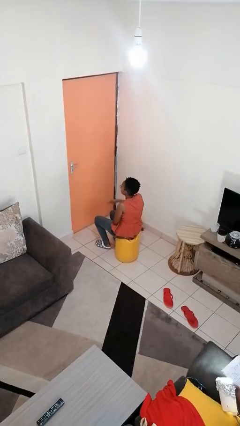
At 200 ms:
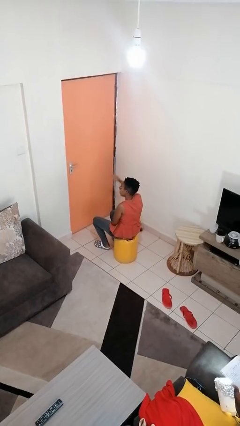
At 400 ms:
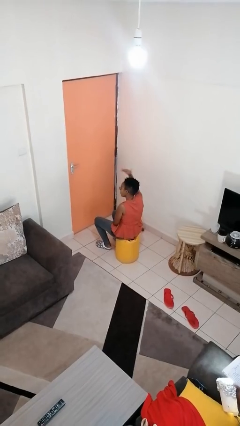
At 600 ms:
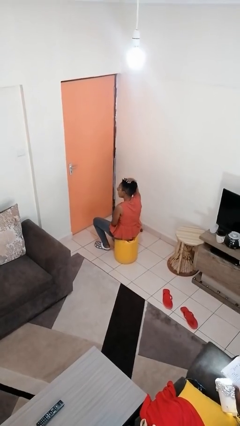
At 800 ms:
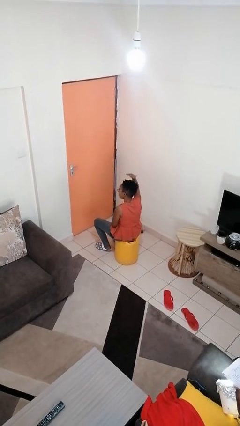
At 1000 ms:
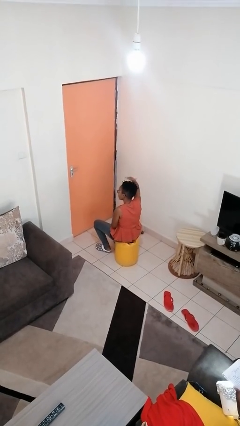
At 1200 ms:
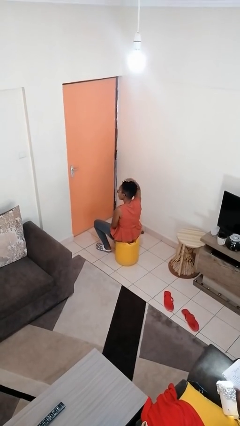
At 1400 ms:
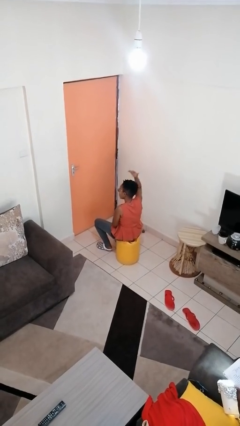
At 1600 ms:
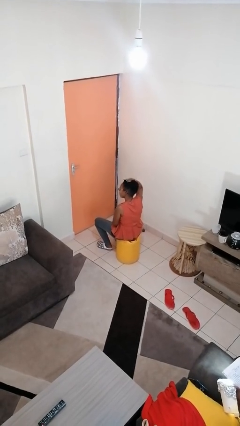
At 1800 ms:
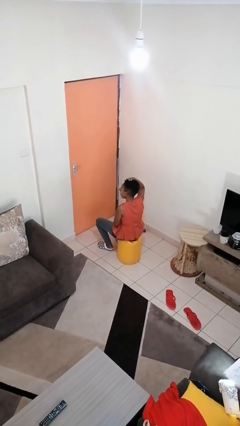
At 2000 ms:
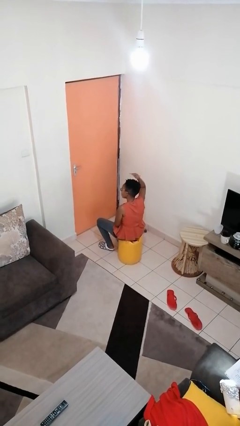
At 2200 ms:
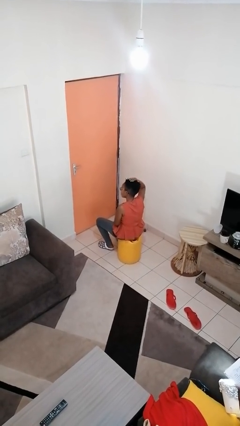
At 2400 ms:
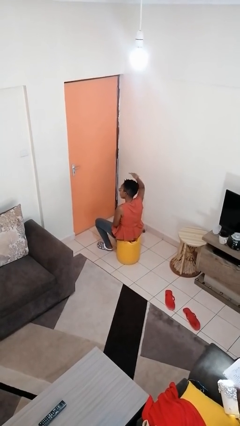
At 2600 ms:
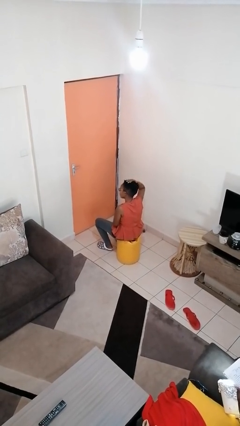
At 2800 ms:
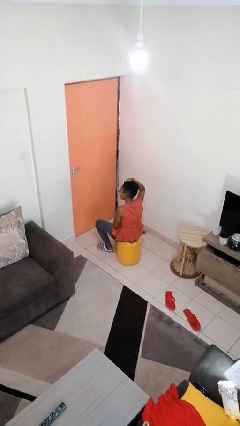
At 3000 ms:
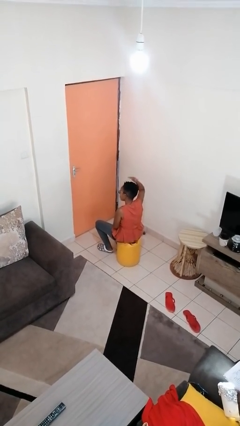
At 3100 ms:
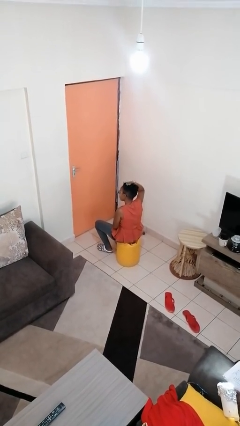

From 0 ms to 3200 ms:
person pats head

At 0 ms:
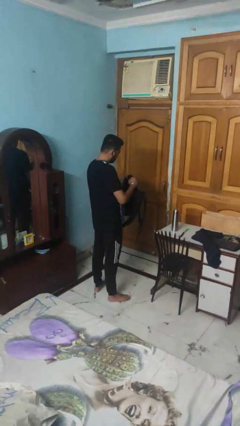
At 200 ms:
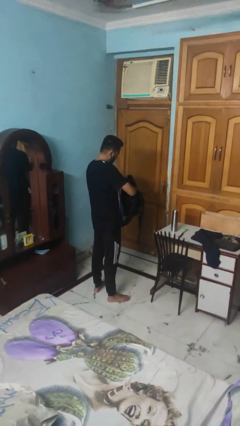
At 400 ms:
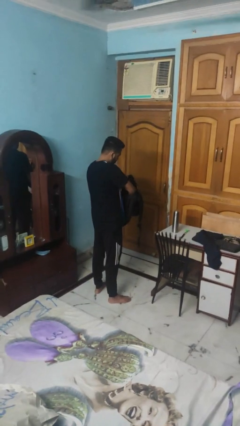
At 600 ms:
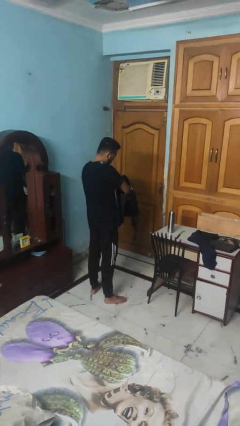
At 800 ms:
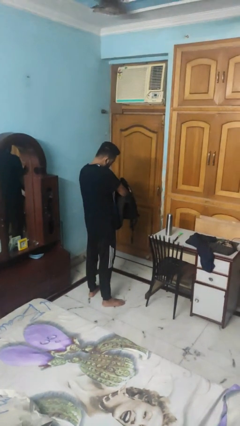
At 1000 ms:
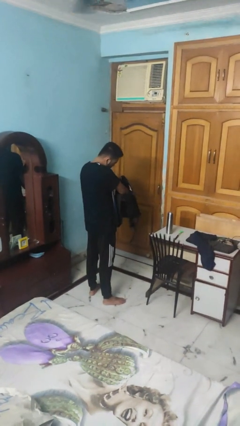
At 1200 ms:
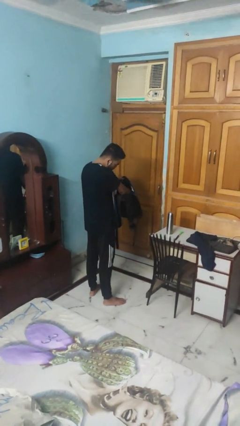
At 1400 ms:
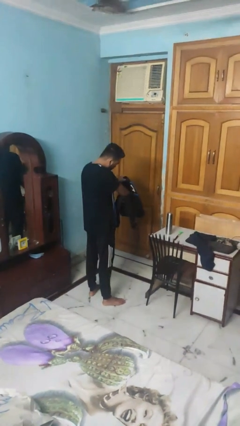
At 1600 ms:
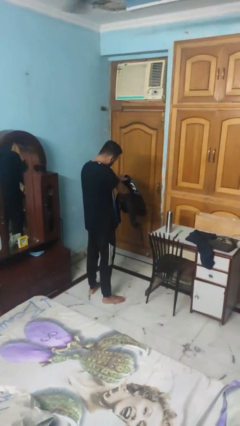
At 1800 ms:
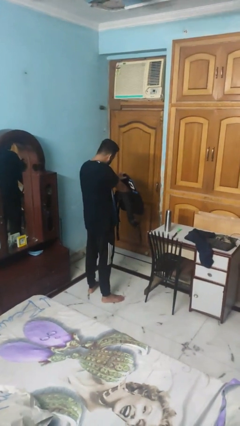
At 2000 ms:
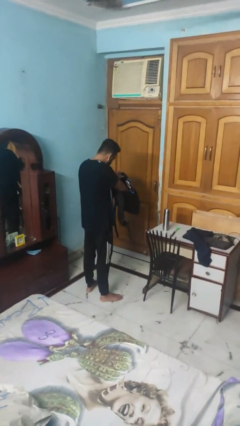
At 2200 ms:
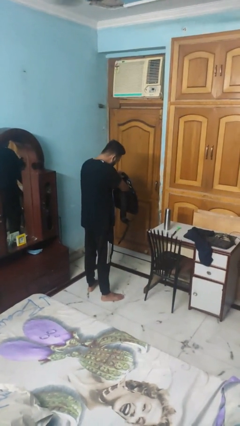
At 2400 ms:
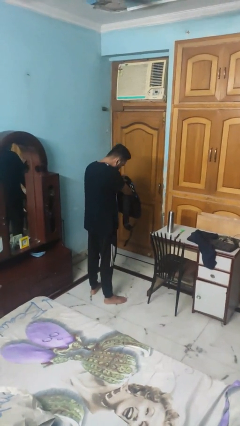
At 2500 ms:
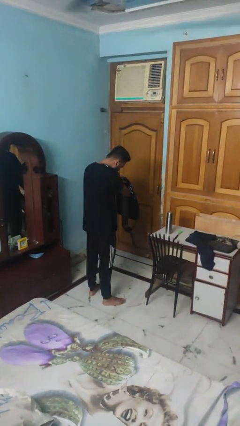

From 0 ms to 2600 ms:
person searches in backpack

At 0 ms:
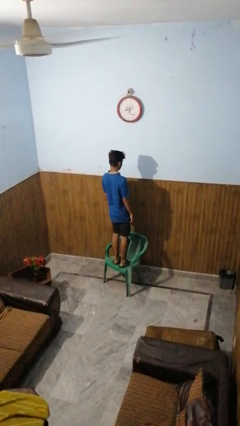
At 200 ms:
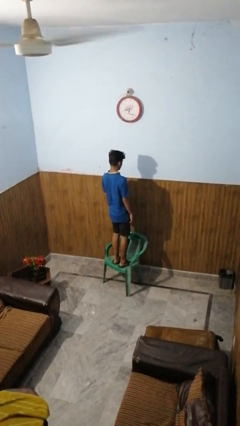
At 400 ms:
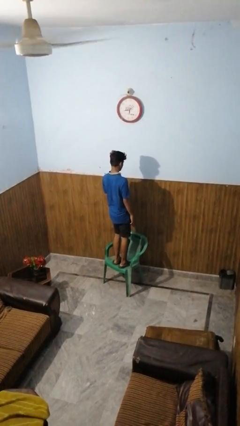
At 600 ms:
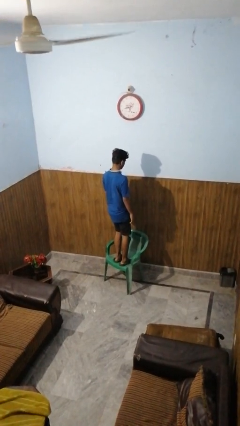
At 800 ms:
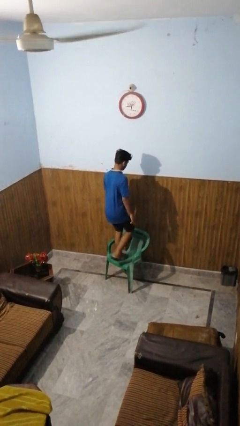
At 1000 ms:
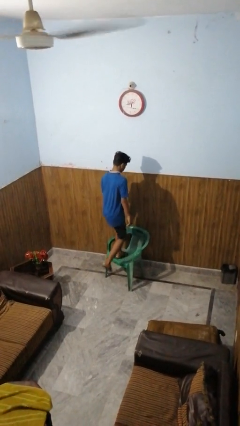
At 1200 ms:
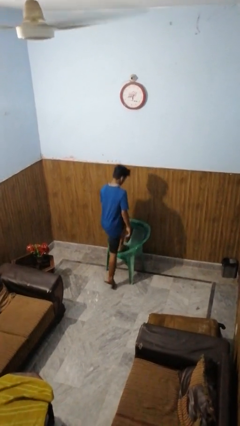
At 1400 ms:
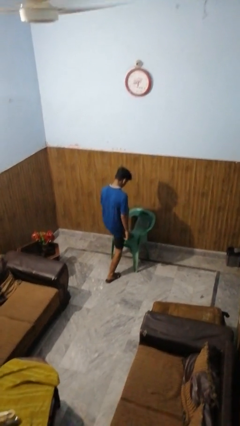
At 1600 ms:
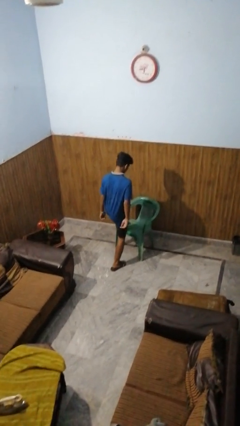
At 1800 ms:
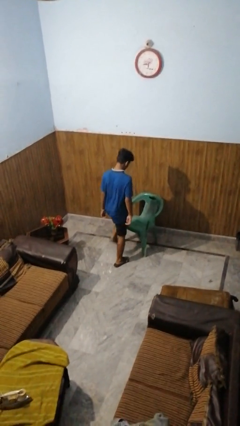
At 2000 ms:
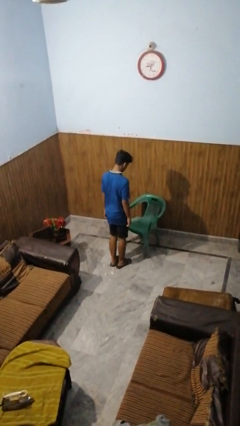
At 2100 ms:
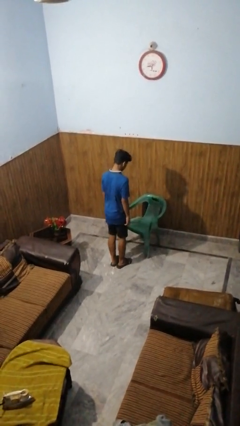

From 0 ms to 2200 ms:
person climbs off chair

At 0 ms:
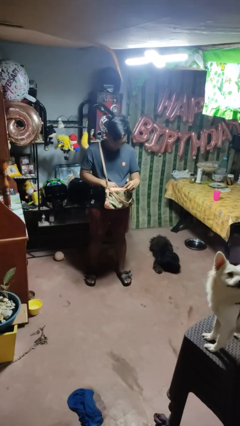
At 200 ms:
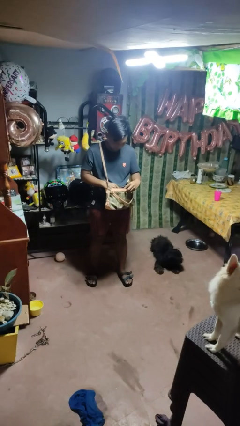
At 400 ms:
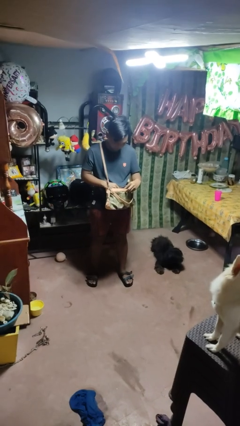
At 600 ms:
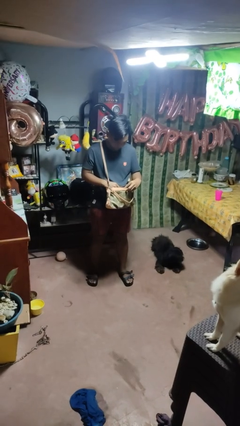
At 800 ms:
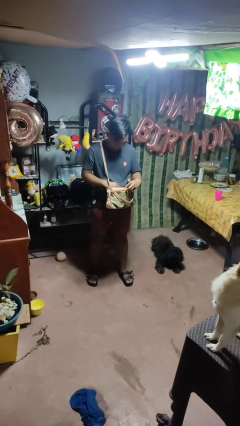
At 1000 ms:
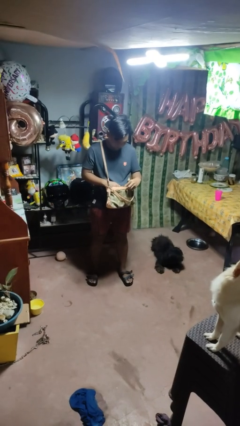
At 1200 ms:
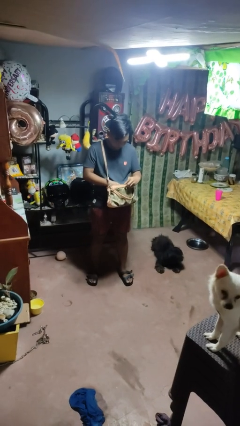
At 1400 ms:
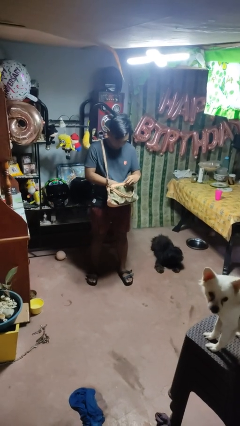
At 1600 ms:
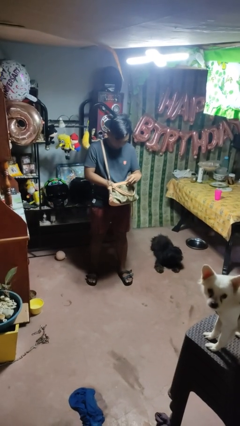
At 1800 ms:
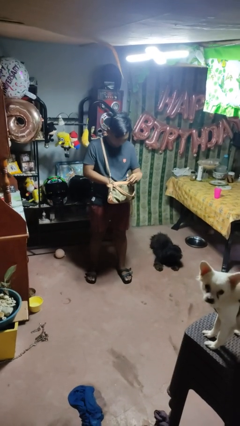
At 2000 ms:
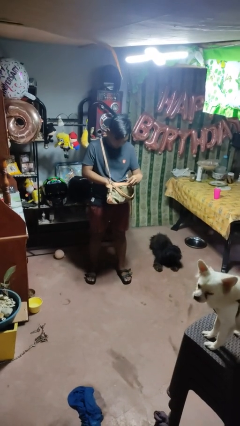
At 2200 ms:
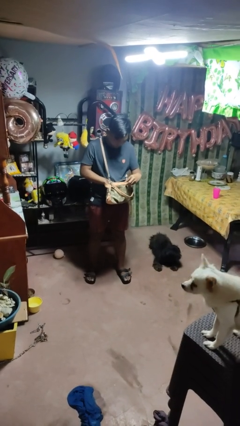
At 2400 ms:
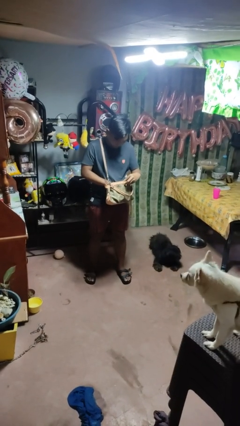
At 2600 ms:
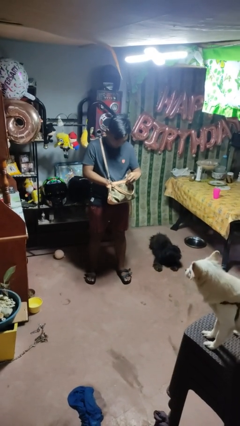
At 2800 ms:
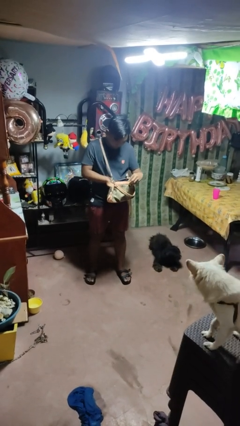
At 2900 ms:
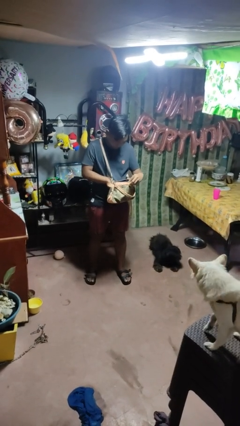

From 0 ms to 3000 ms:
person searches in purse

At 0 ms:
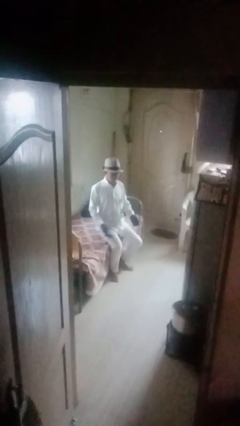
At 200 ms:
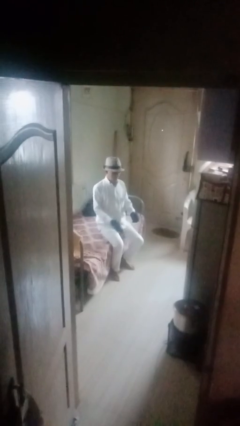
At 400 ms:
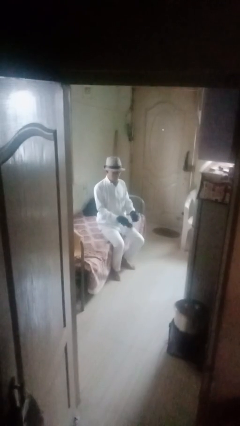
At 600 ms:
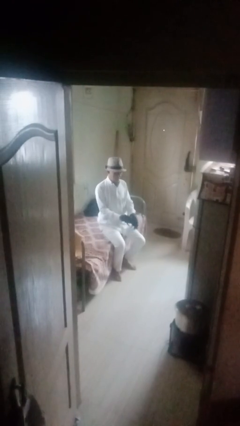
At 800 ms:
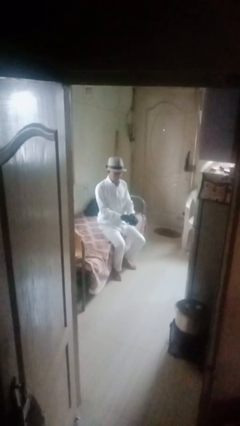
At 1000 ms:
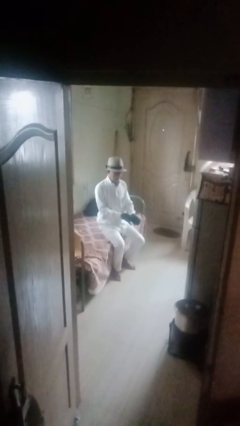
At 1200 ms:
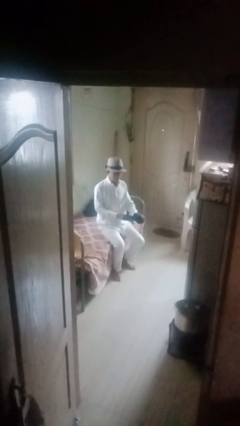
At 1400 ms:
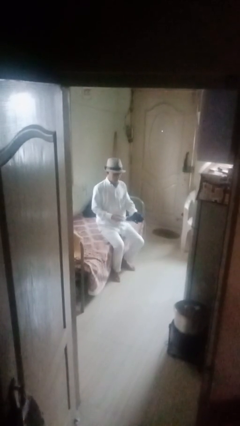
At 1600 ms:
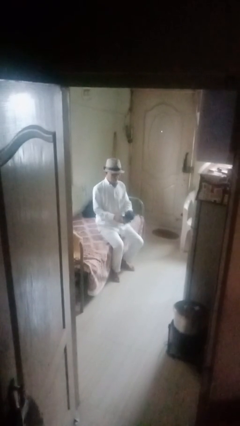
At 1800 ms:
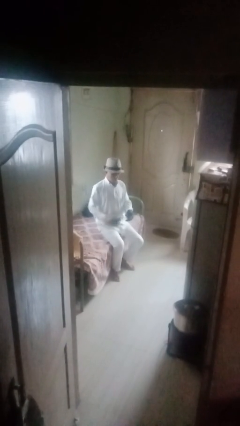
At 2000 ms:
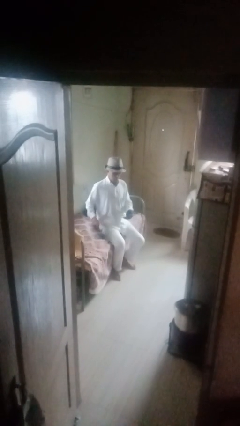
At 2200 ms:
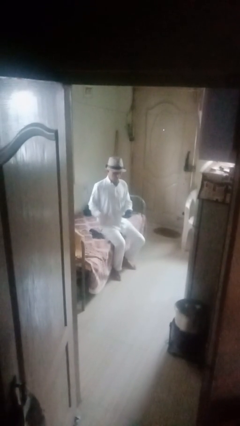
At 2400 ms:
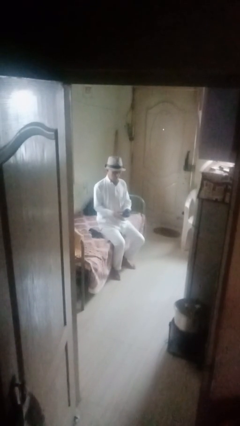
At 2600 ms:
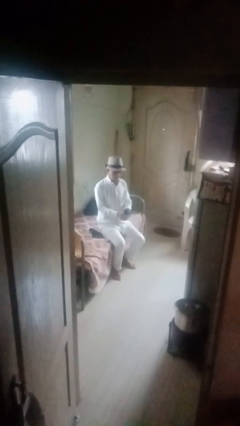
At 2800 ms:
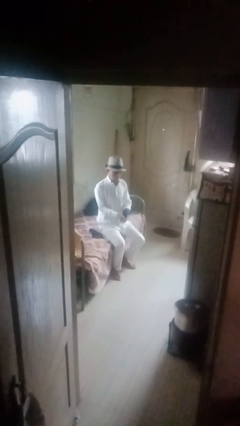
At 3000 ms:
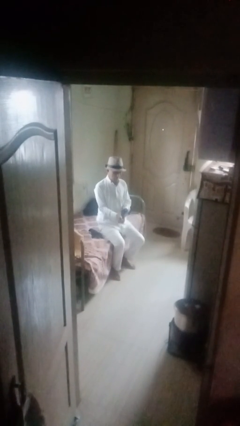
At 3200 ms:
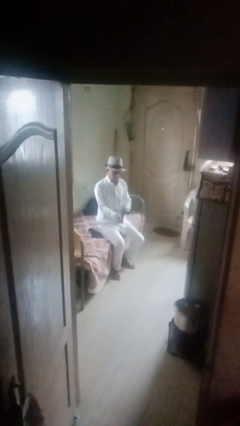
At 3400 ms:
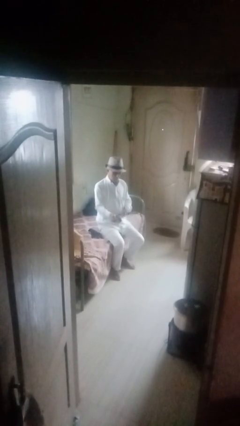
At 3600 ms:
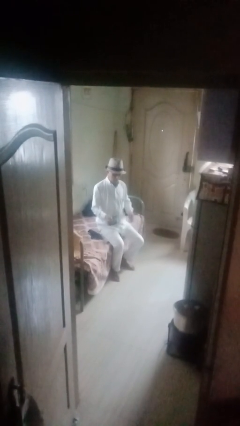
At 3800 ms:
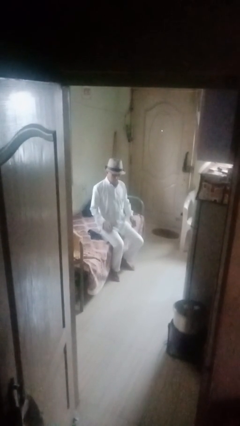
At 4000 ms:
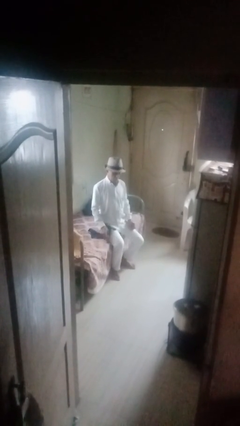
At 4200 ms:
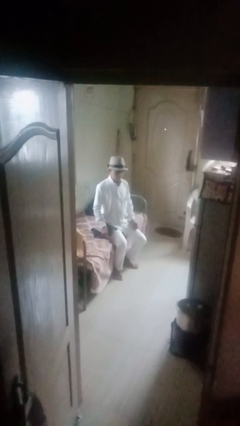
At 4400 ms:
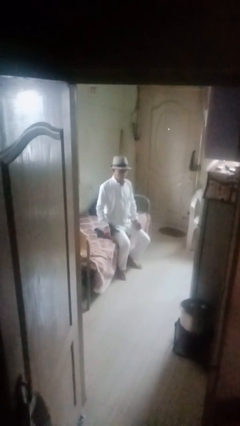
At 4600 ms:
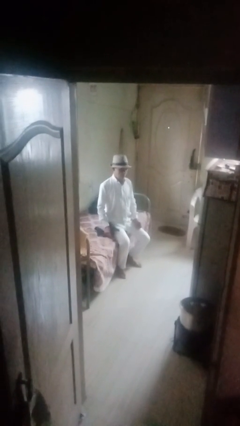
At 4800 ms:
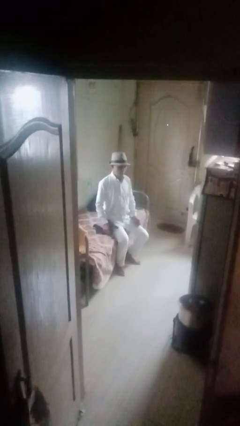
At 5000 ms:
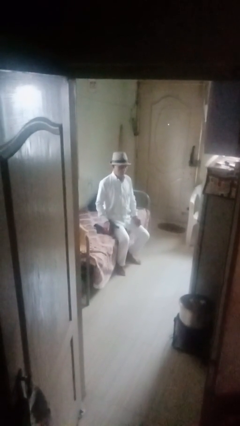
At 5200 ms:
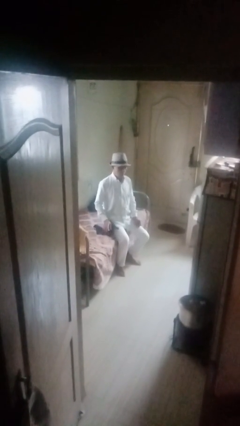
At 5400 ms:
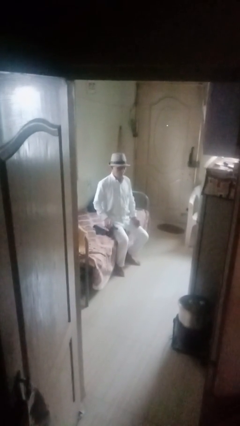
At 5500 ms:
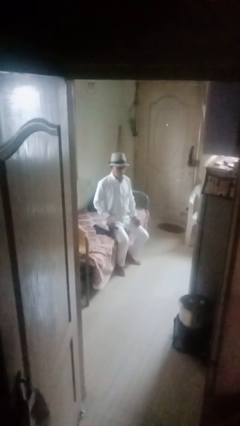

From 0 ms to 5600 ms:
person takes off gloves

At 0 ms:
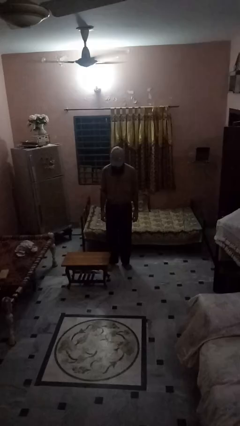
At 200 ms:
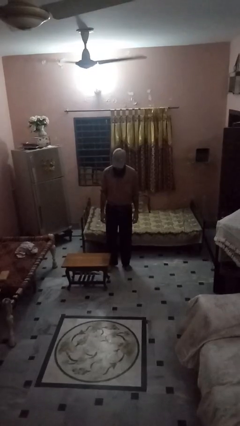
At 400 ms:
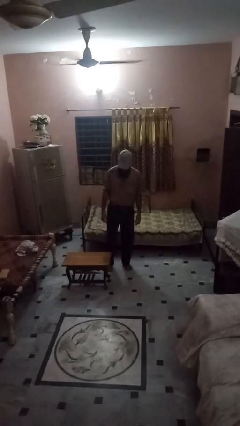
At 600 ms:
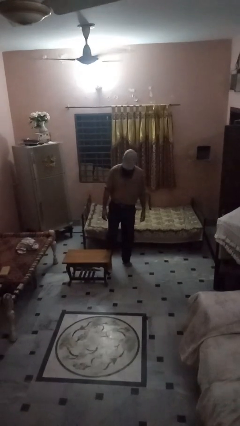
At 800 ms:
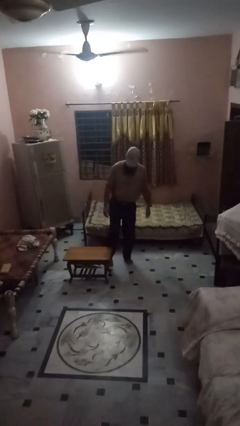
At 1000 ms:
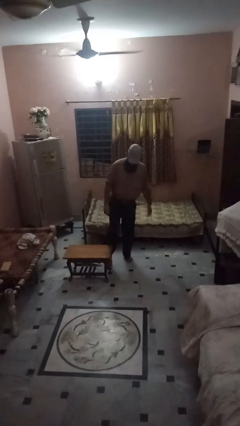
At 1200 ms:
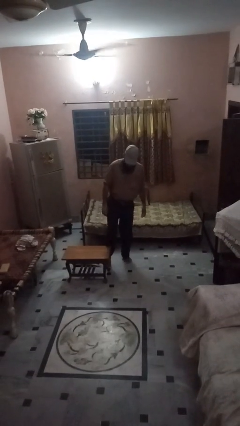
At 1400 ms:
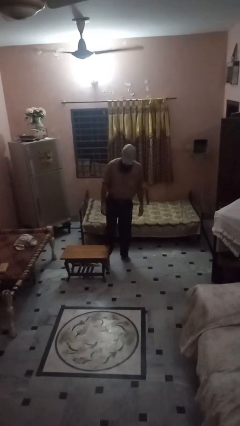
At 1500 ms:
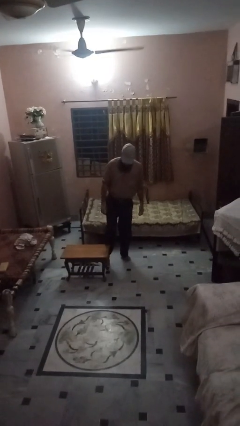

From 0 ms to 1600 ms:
person trips on object on floor
